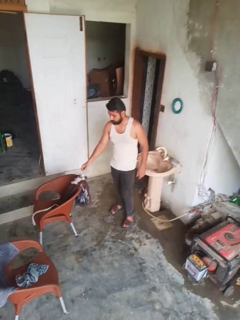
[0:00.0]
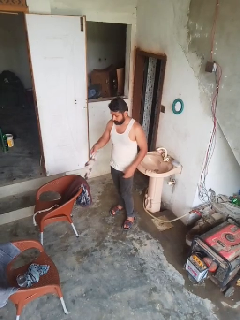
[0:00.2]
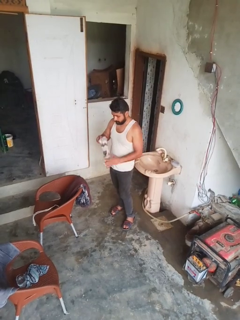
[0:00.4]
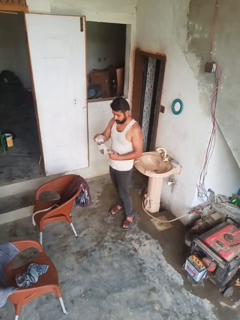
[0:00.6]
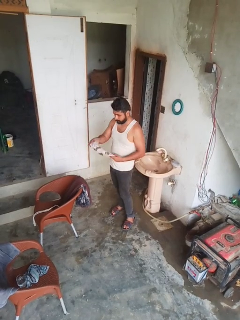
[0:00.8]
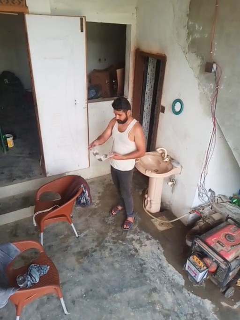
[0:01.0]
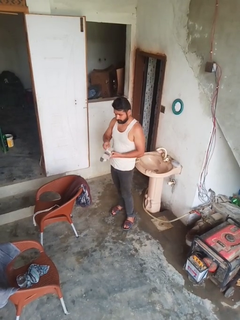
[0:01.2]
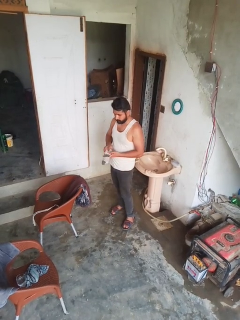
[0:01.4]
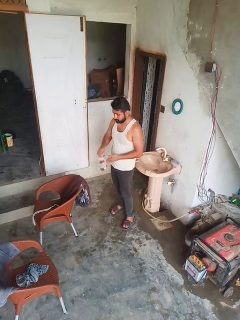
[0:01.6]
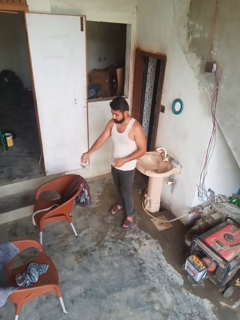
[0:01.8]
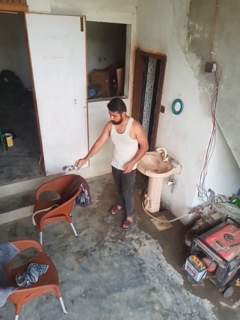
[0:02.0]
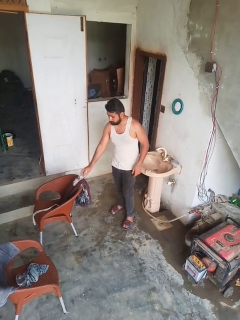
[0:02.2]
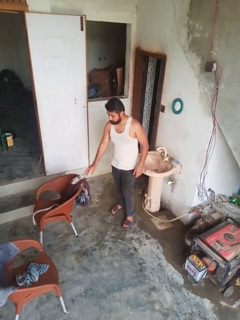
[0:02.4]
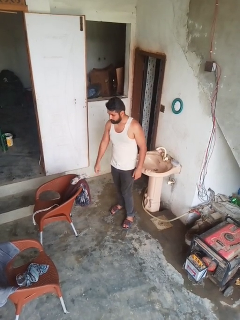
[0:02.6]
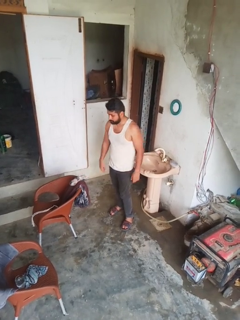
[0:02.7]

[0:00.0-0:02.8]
person folds socks

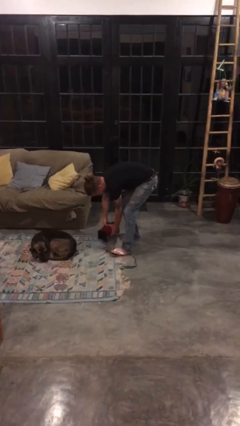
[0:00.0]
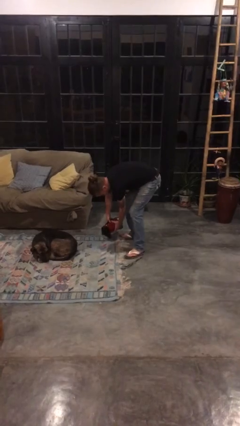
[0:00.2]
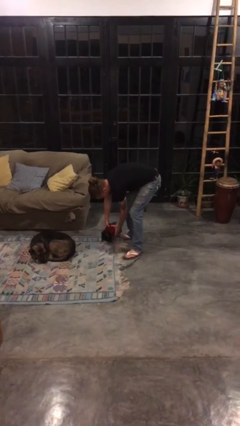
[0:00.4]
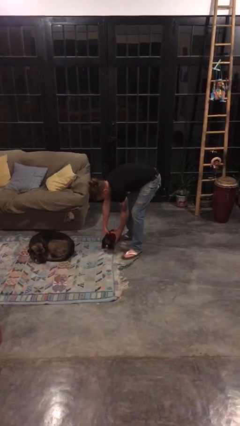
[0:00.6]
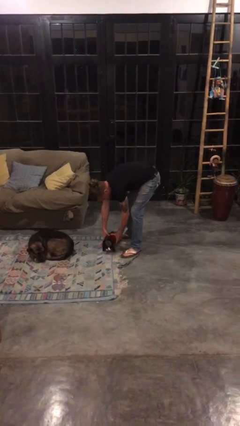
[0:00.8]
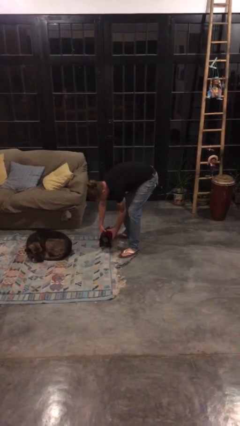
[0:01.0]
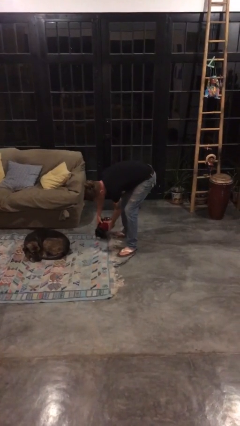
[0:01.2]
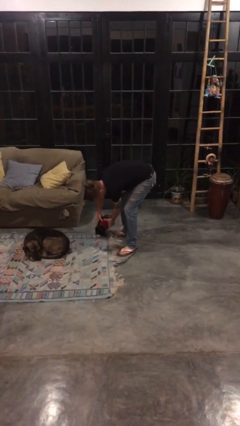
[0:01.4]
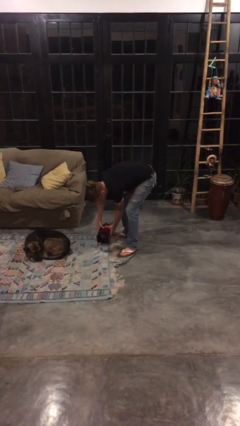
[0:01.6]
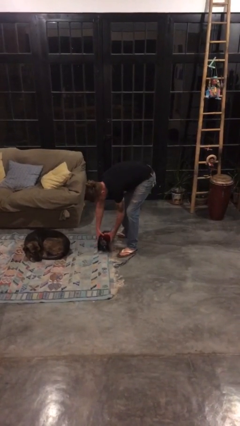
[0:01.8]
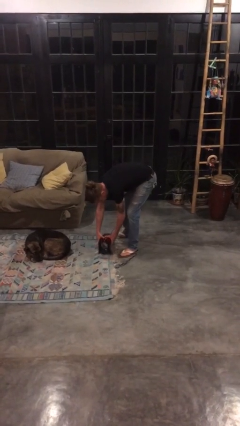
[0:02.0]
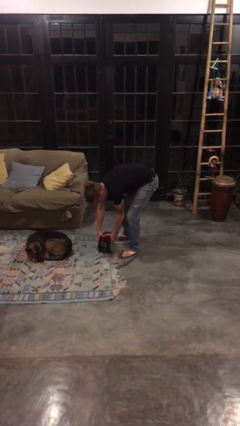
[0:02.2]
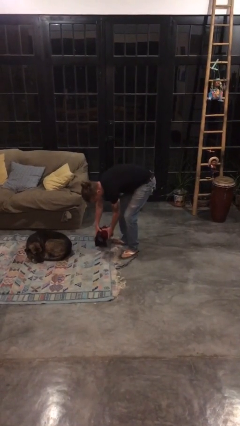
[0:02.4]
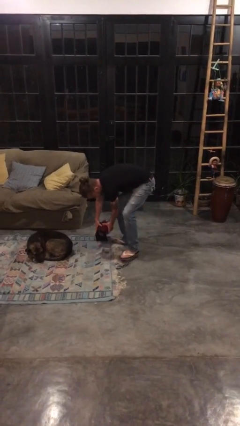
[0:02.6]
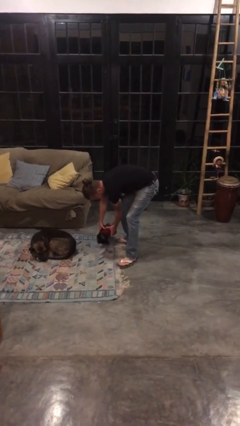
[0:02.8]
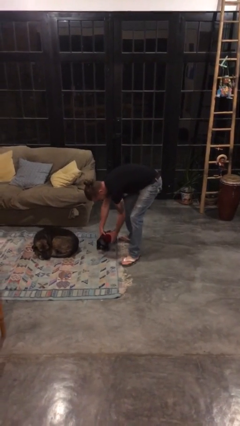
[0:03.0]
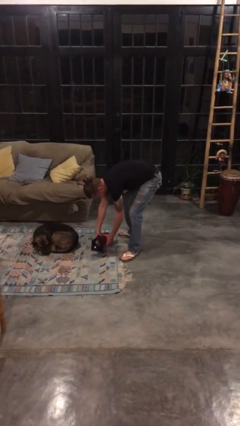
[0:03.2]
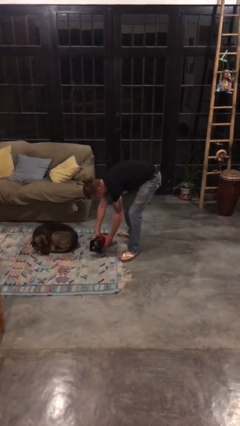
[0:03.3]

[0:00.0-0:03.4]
person vacuums carpet

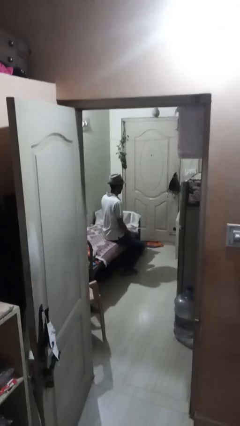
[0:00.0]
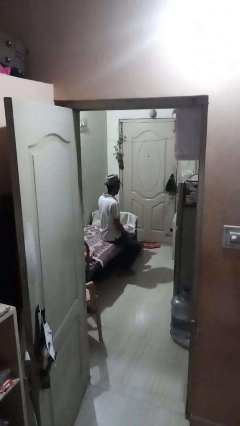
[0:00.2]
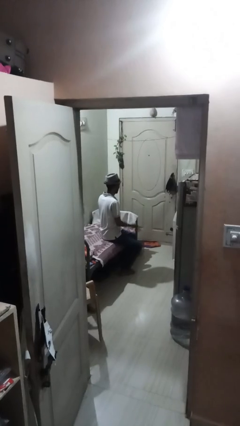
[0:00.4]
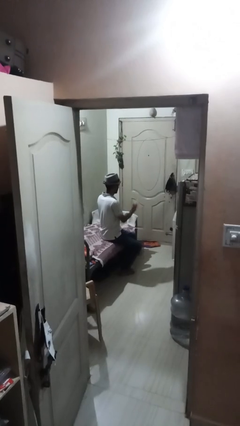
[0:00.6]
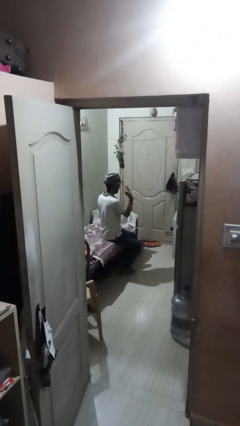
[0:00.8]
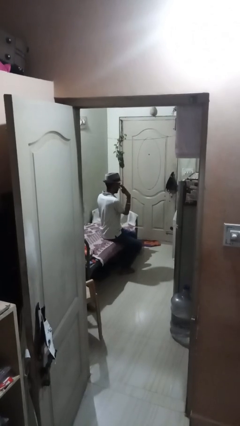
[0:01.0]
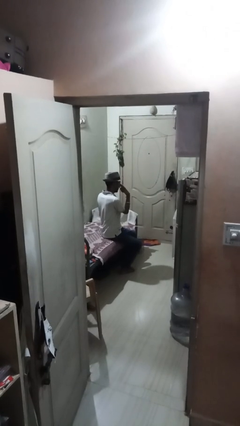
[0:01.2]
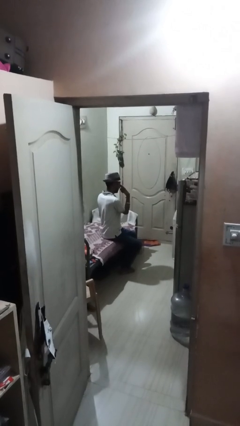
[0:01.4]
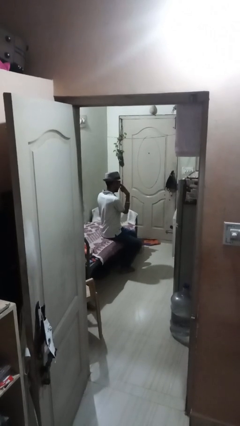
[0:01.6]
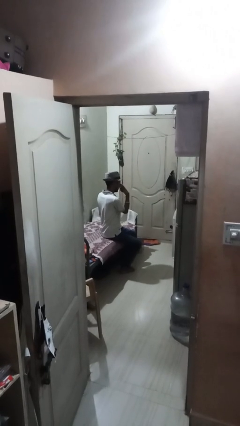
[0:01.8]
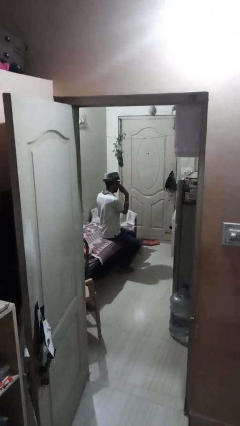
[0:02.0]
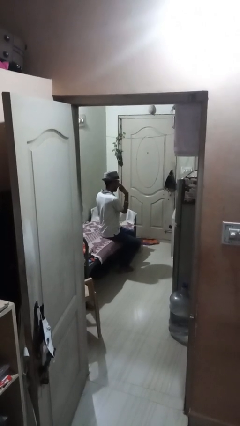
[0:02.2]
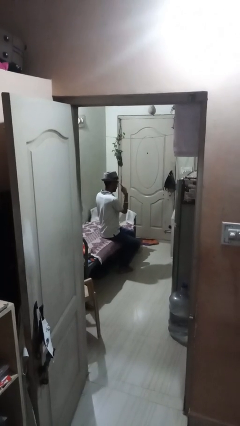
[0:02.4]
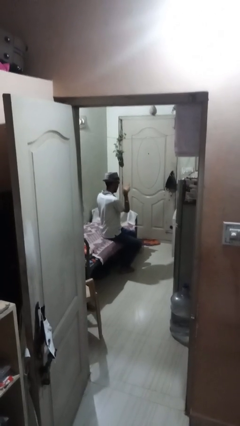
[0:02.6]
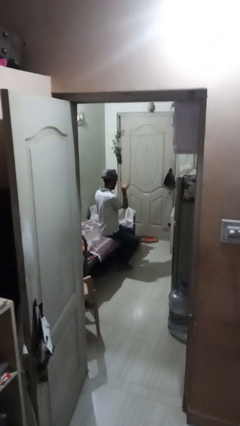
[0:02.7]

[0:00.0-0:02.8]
person gestures watch closely

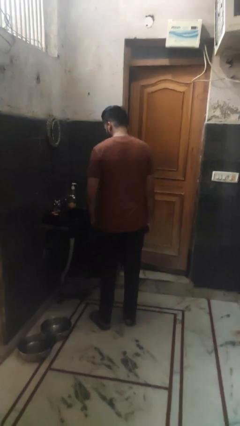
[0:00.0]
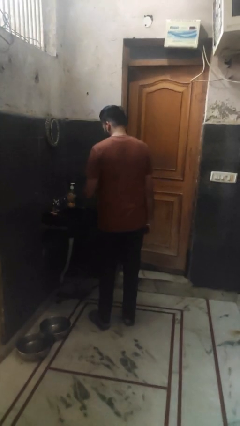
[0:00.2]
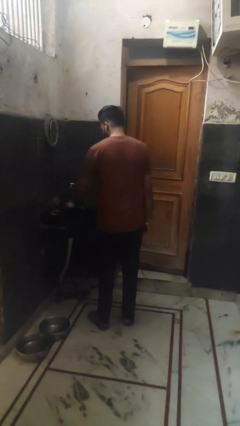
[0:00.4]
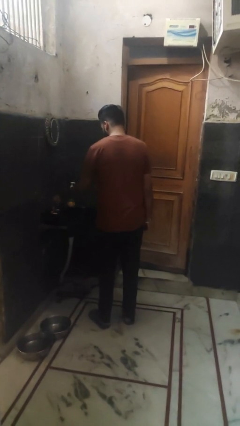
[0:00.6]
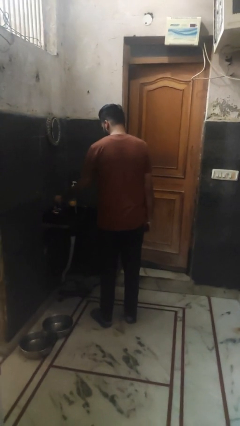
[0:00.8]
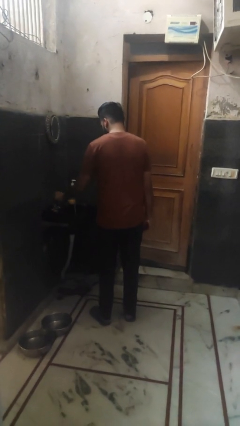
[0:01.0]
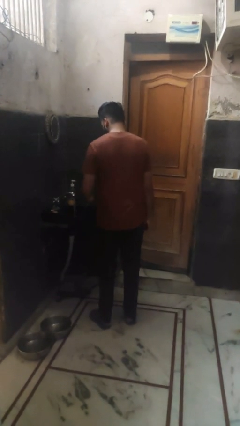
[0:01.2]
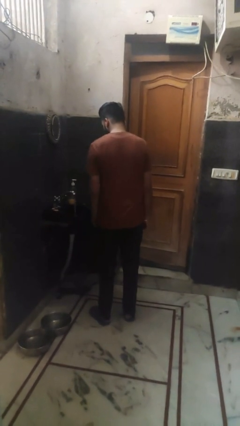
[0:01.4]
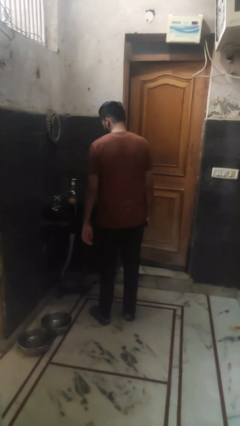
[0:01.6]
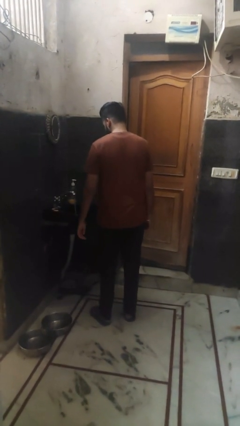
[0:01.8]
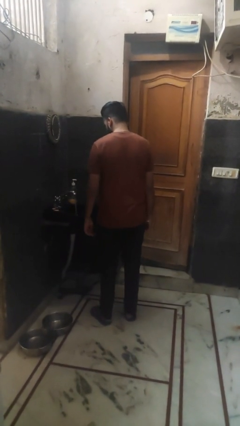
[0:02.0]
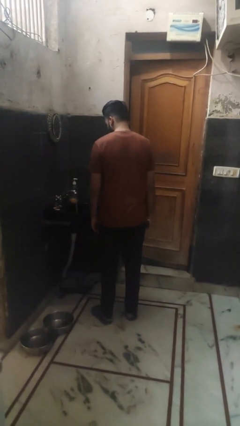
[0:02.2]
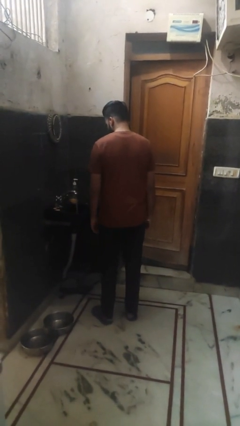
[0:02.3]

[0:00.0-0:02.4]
person turns on faucet

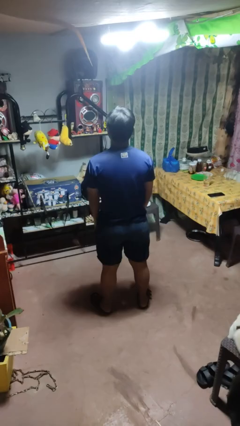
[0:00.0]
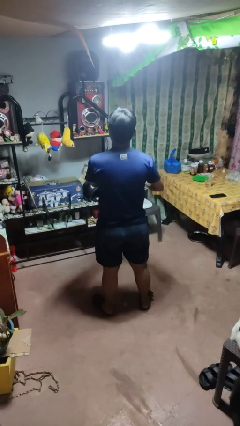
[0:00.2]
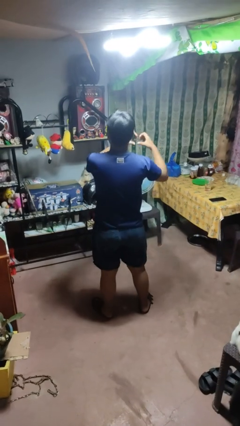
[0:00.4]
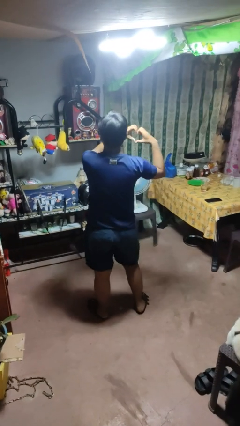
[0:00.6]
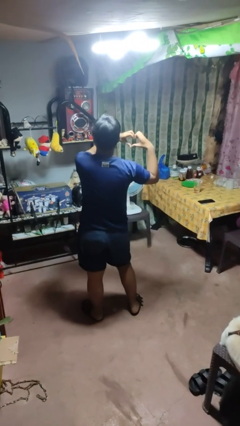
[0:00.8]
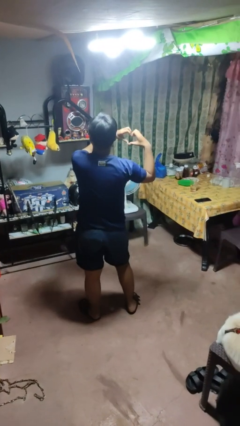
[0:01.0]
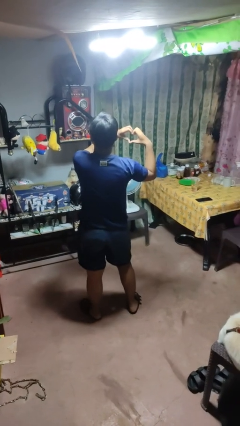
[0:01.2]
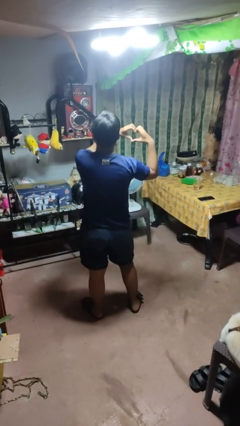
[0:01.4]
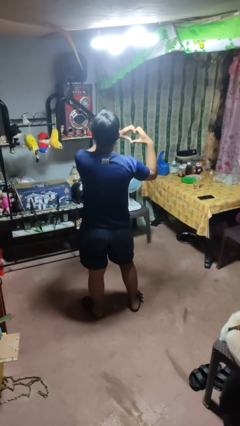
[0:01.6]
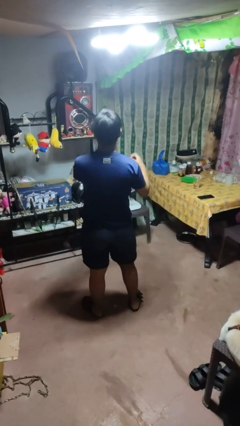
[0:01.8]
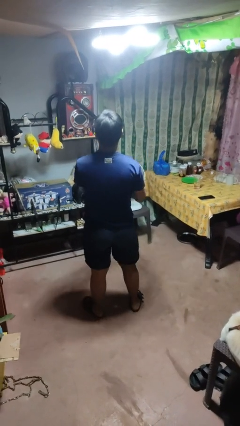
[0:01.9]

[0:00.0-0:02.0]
person gestures heart

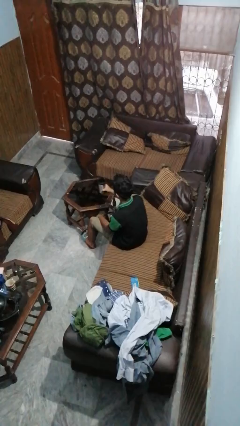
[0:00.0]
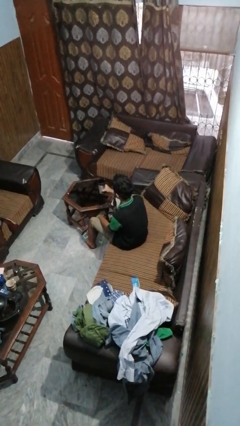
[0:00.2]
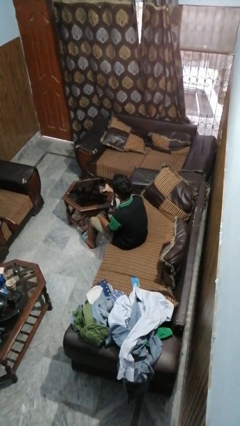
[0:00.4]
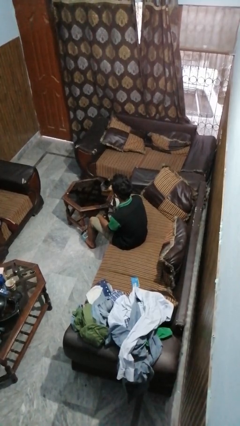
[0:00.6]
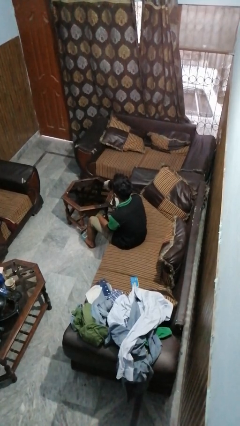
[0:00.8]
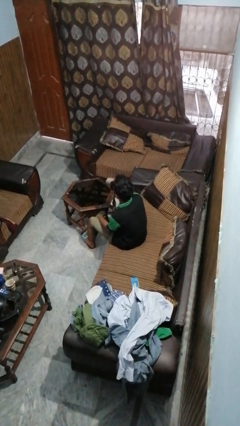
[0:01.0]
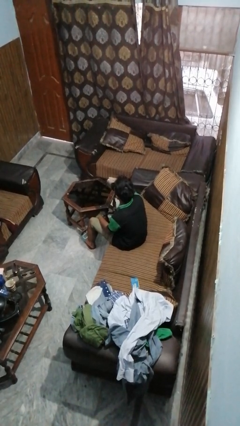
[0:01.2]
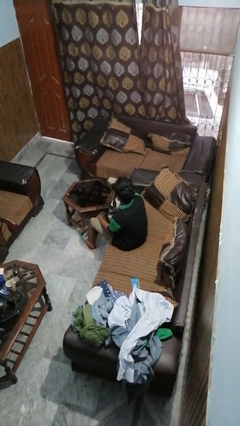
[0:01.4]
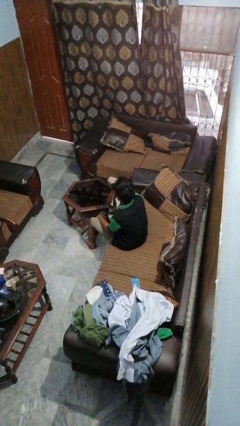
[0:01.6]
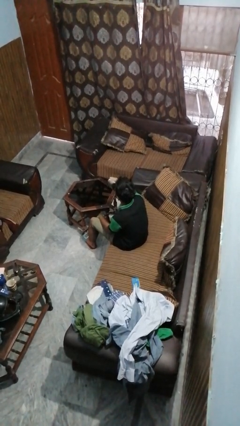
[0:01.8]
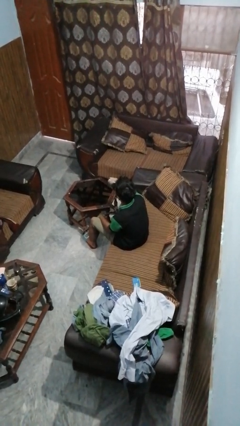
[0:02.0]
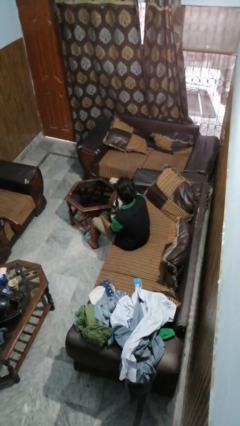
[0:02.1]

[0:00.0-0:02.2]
person drinks from mug

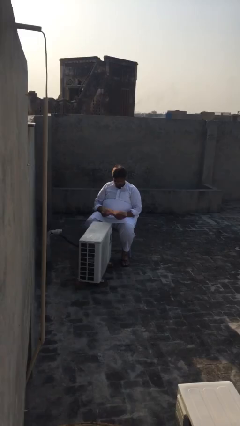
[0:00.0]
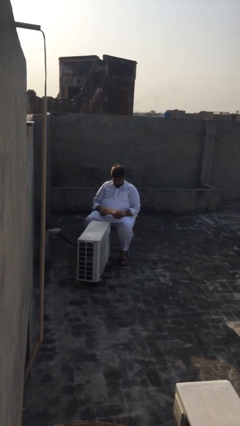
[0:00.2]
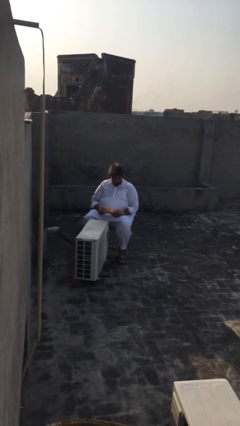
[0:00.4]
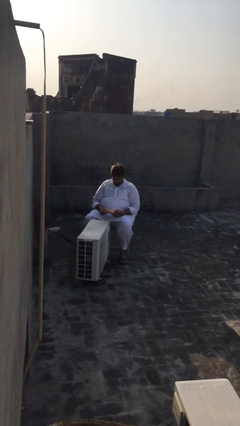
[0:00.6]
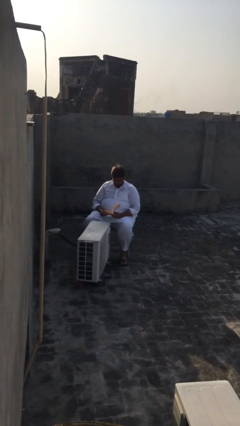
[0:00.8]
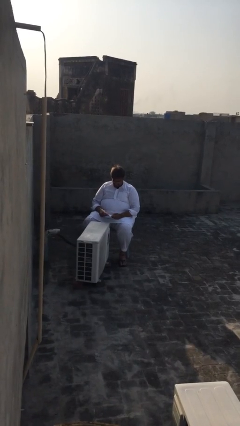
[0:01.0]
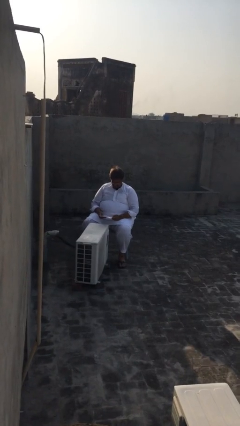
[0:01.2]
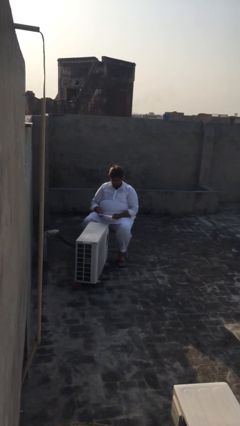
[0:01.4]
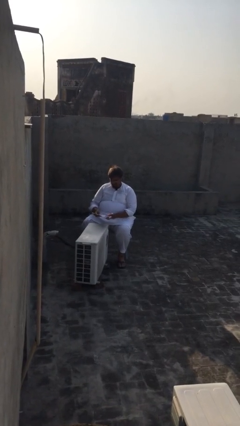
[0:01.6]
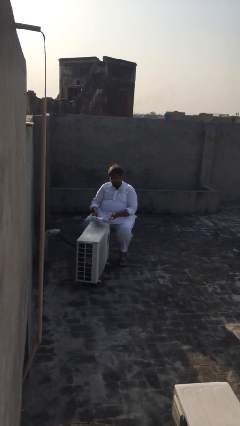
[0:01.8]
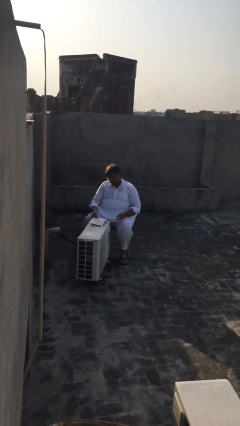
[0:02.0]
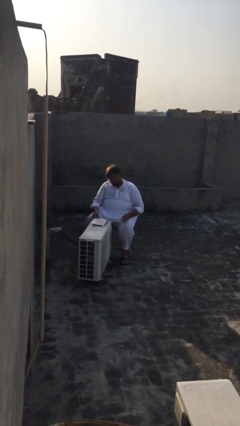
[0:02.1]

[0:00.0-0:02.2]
person puts down object on table
